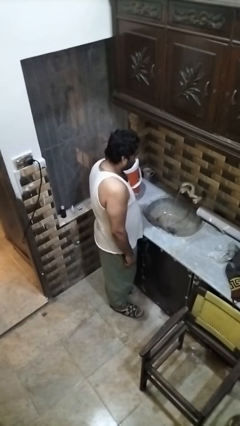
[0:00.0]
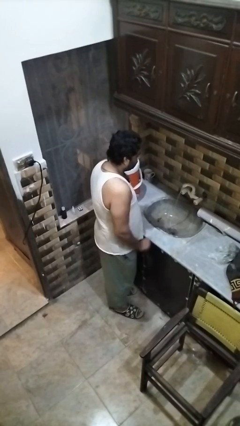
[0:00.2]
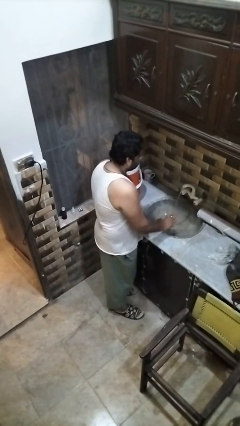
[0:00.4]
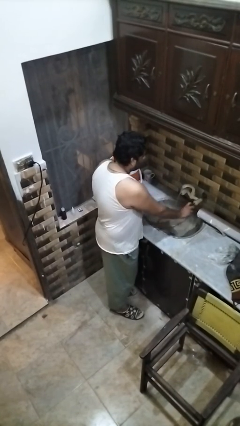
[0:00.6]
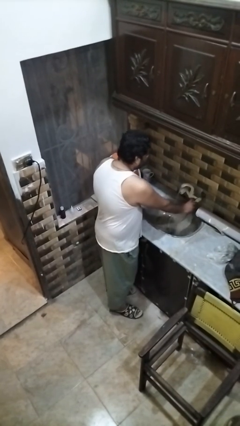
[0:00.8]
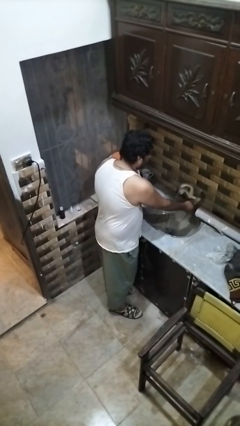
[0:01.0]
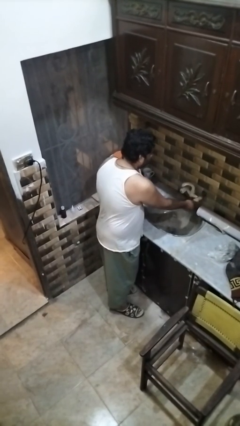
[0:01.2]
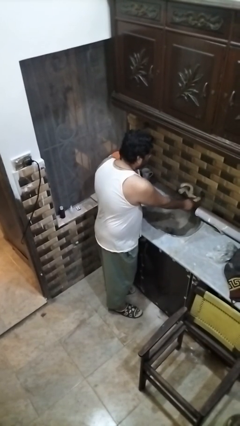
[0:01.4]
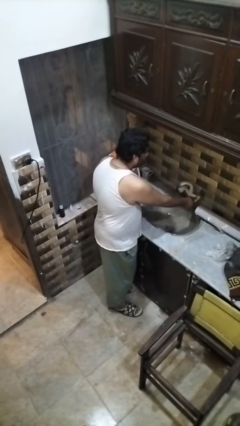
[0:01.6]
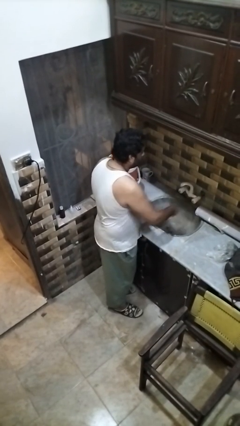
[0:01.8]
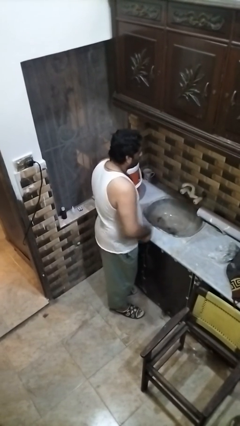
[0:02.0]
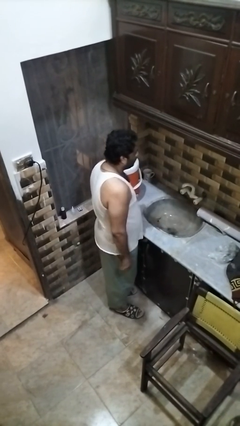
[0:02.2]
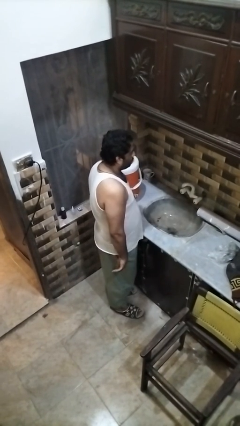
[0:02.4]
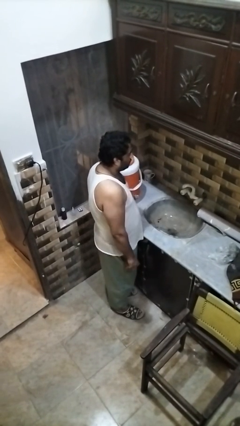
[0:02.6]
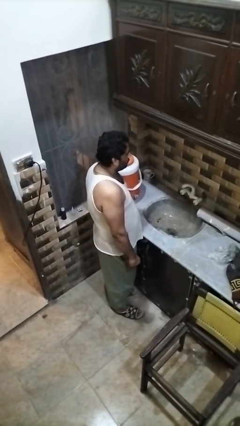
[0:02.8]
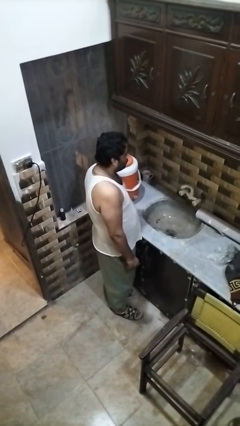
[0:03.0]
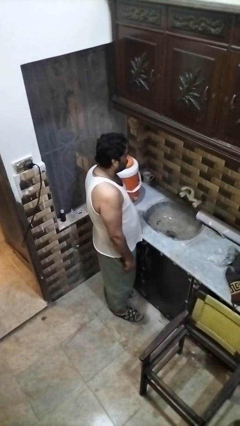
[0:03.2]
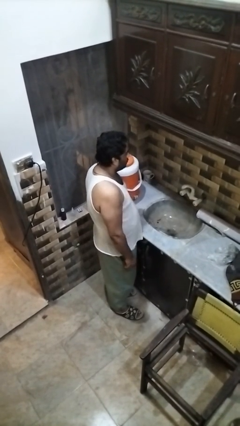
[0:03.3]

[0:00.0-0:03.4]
person turns off faucet

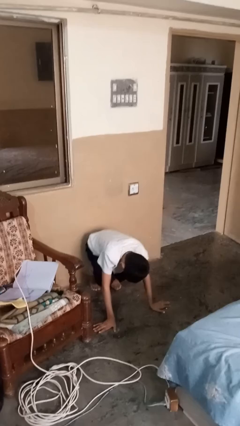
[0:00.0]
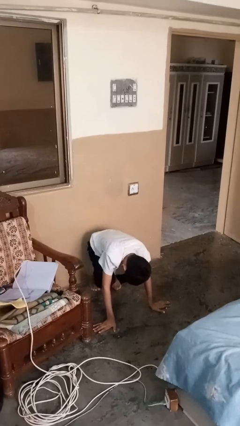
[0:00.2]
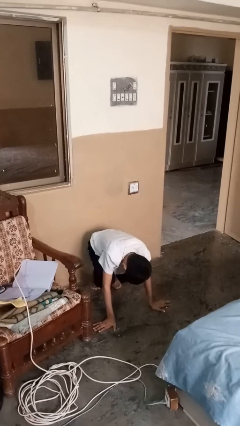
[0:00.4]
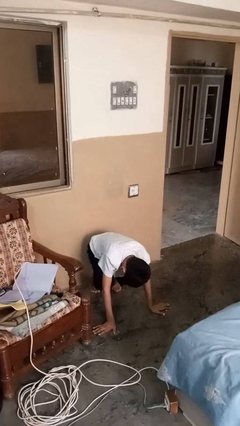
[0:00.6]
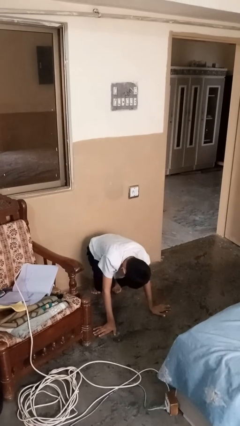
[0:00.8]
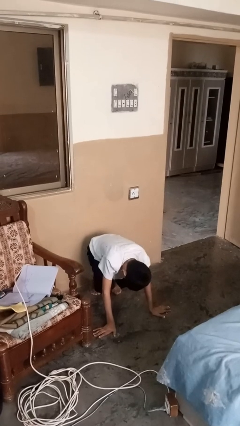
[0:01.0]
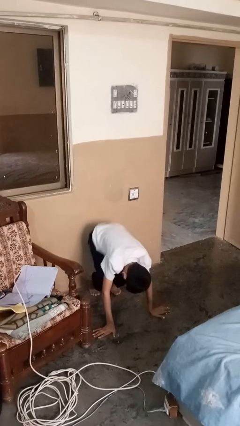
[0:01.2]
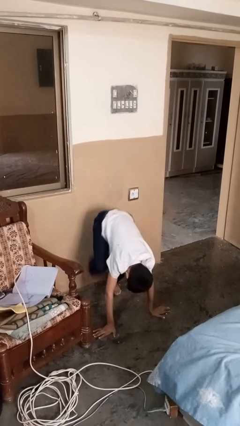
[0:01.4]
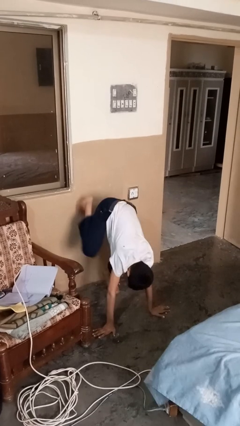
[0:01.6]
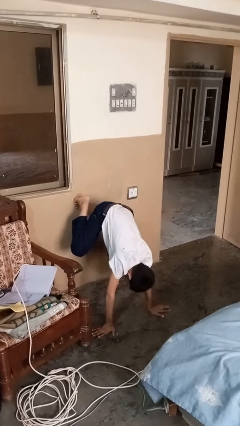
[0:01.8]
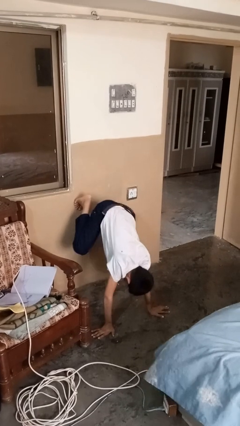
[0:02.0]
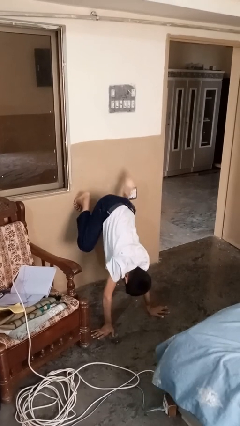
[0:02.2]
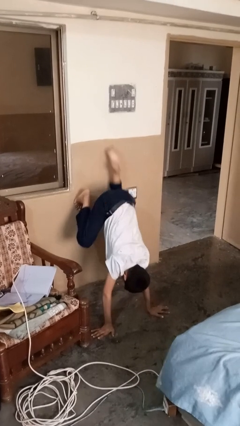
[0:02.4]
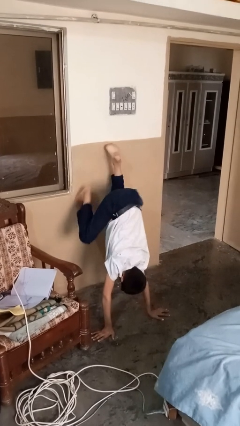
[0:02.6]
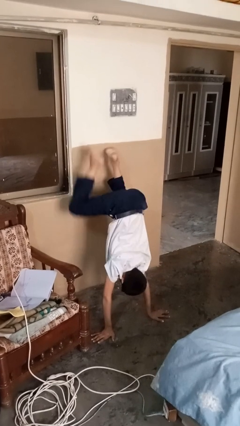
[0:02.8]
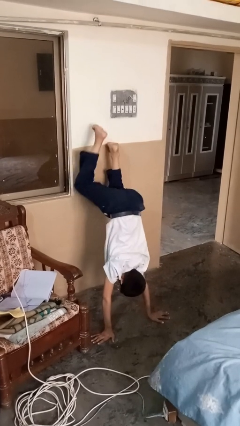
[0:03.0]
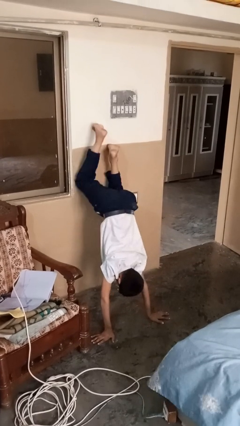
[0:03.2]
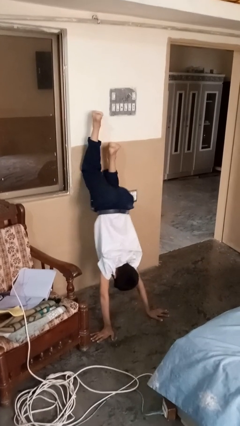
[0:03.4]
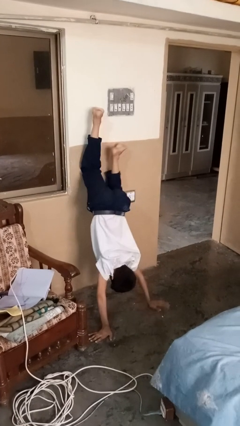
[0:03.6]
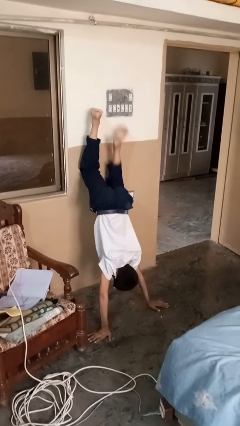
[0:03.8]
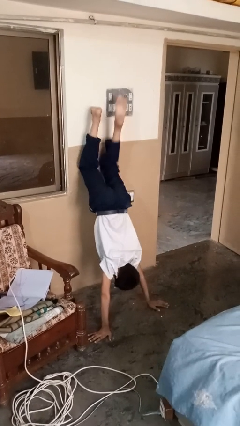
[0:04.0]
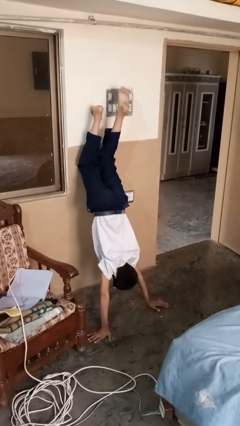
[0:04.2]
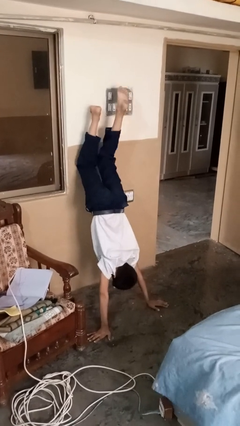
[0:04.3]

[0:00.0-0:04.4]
person somersaults

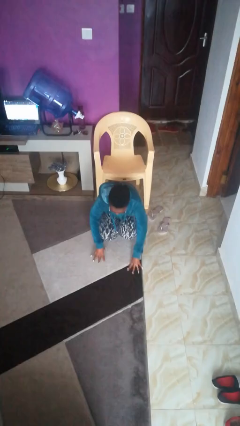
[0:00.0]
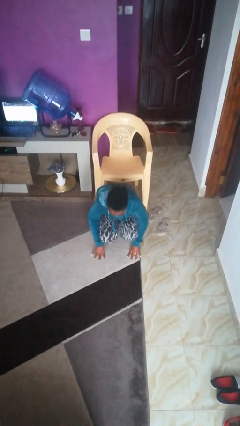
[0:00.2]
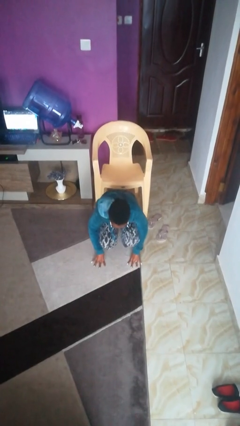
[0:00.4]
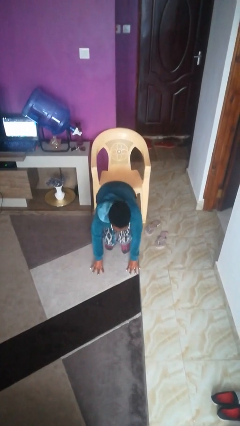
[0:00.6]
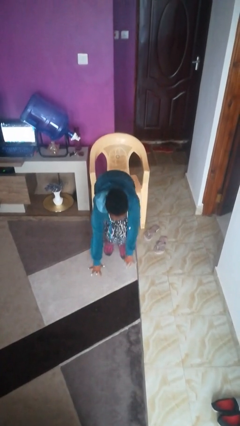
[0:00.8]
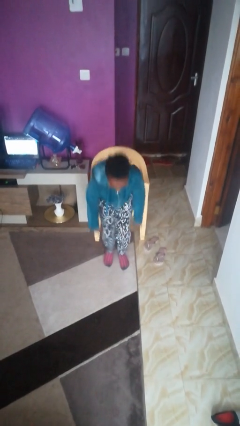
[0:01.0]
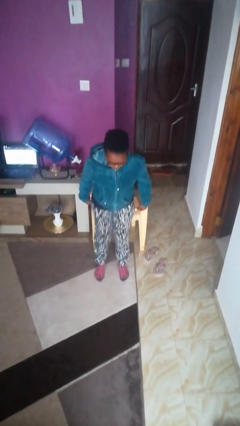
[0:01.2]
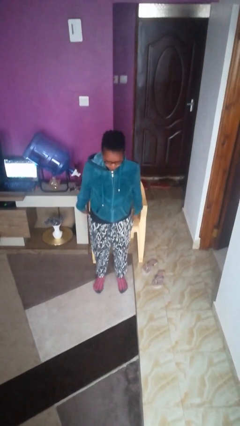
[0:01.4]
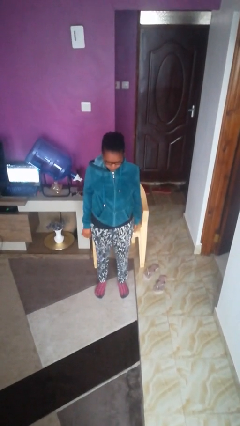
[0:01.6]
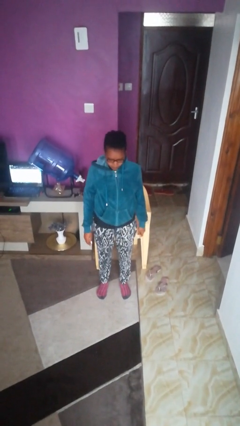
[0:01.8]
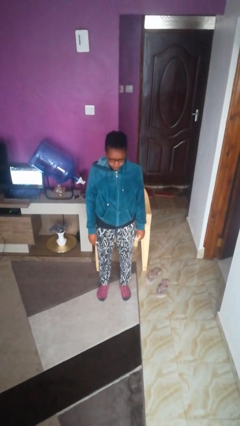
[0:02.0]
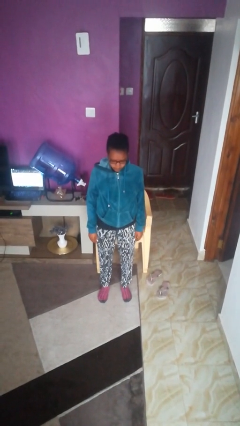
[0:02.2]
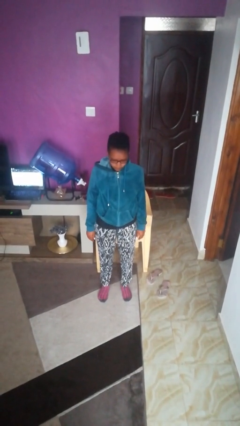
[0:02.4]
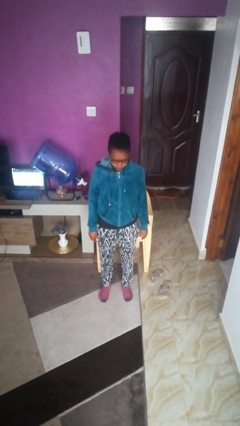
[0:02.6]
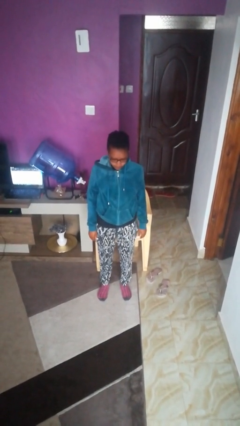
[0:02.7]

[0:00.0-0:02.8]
person stands up from floor

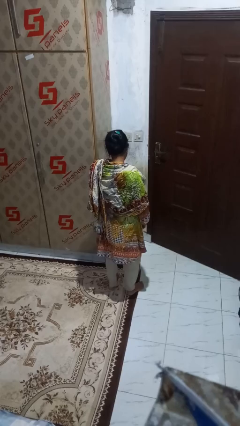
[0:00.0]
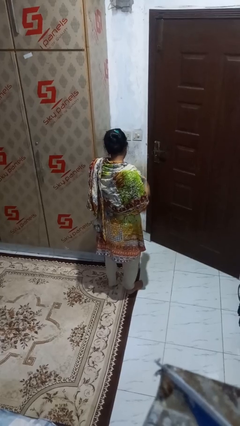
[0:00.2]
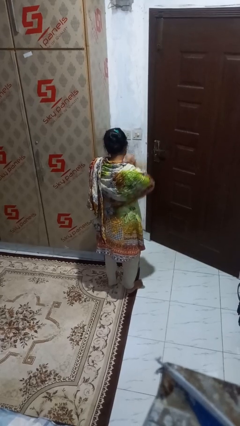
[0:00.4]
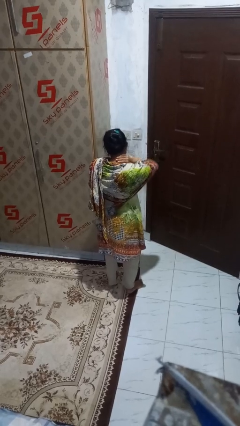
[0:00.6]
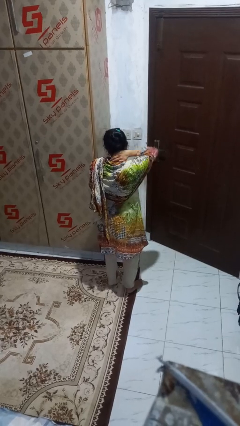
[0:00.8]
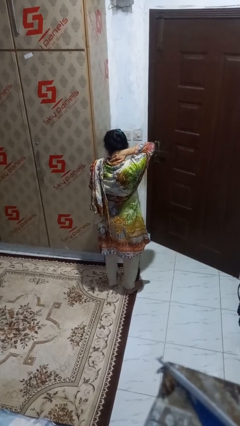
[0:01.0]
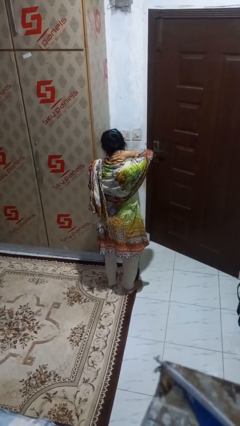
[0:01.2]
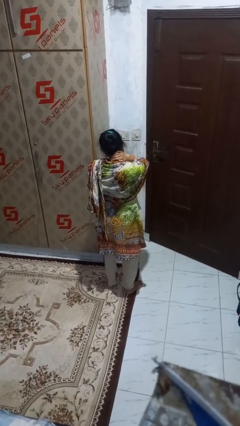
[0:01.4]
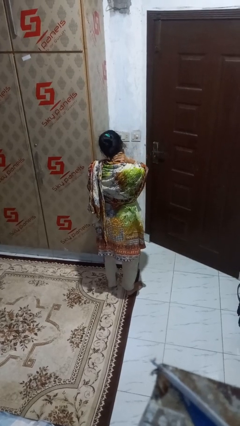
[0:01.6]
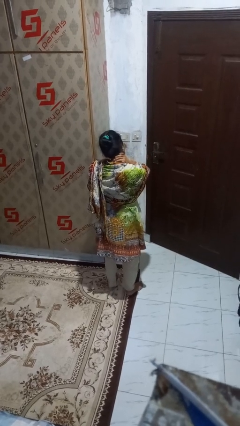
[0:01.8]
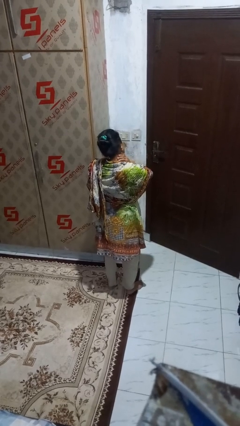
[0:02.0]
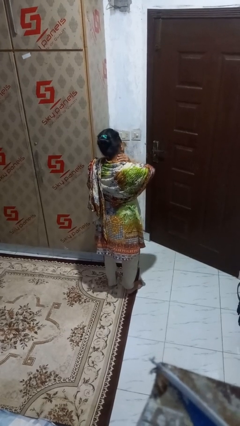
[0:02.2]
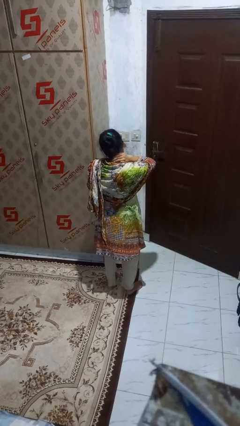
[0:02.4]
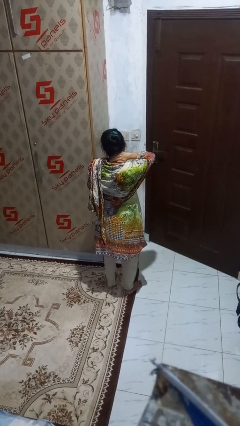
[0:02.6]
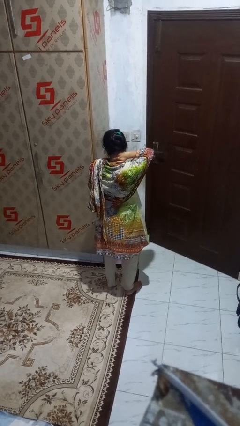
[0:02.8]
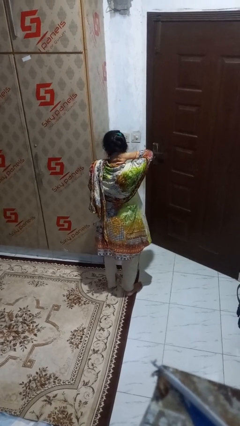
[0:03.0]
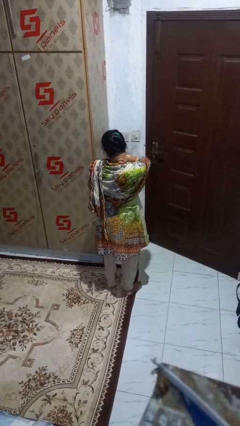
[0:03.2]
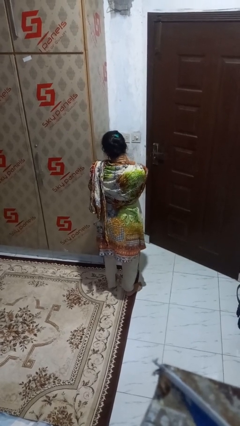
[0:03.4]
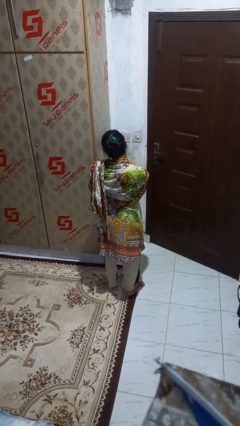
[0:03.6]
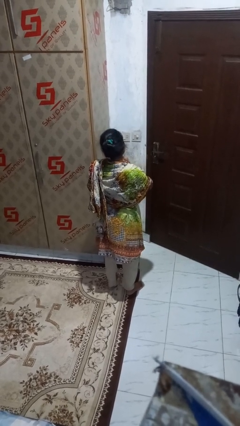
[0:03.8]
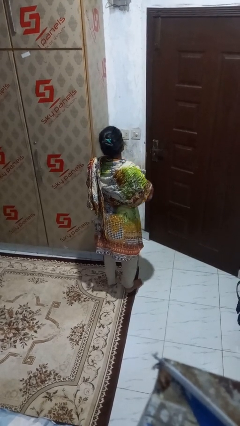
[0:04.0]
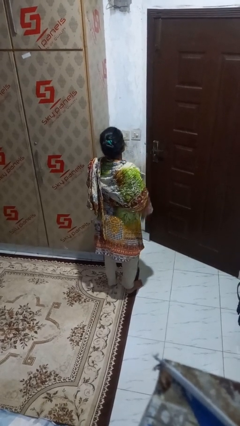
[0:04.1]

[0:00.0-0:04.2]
person rubs neck

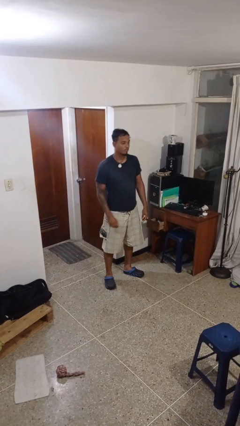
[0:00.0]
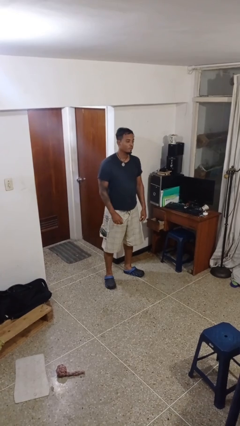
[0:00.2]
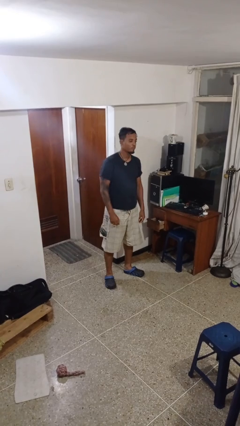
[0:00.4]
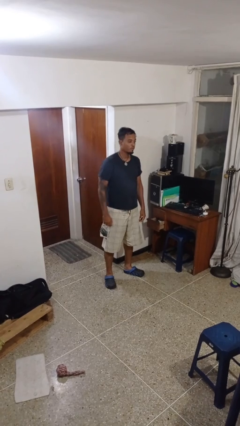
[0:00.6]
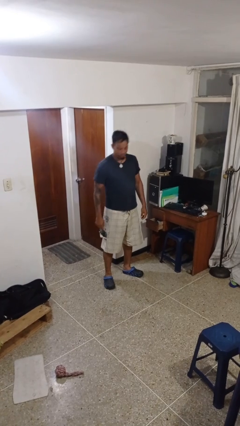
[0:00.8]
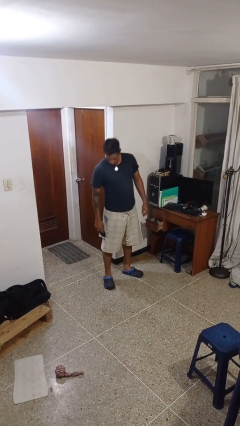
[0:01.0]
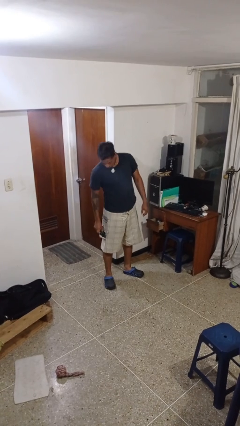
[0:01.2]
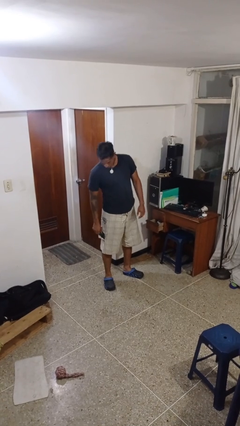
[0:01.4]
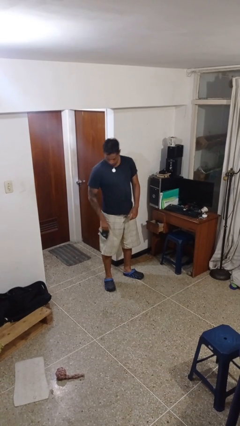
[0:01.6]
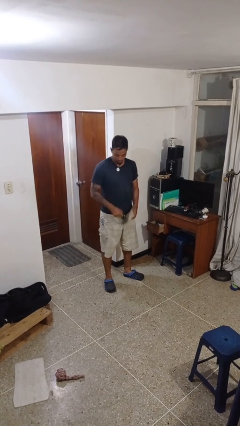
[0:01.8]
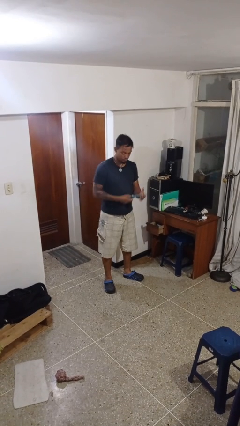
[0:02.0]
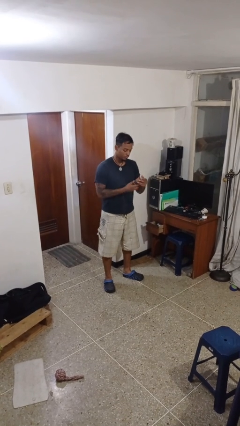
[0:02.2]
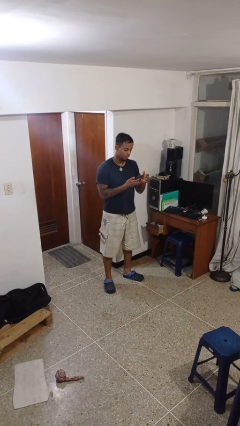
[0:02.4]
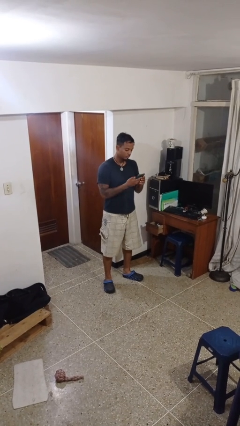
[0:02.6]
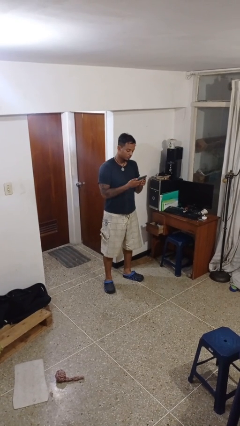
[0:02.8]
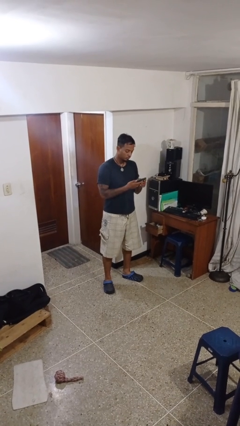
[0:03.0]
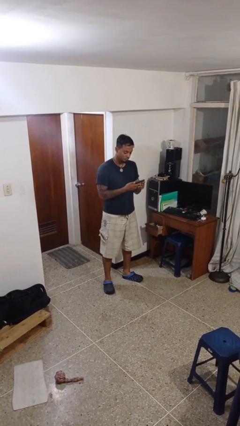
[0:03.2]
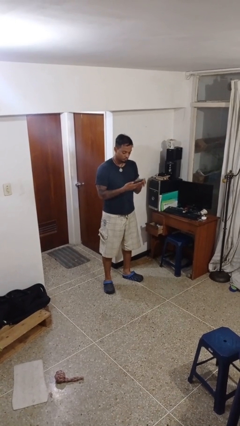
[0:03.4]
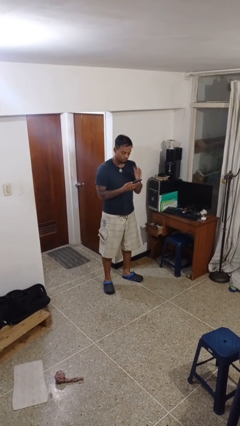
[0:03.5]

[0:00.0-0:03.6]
person takes phone from pocket
